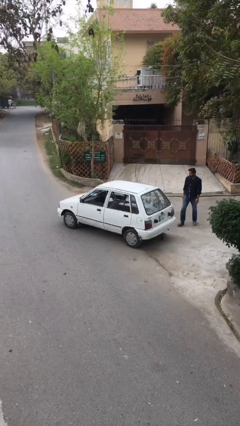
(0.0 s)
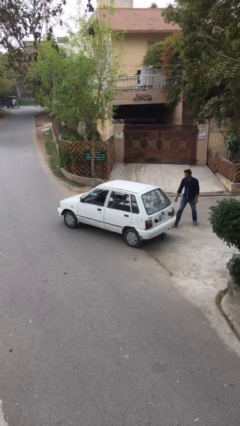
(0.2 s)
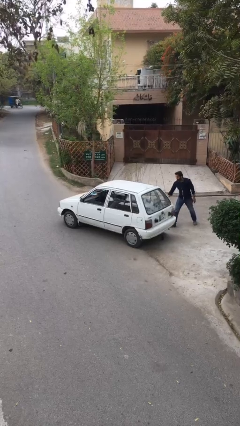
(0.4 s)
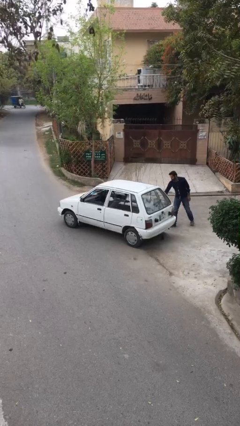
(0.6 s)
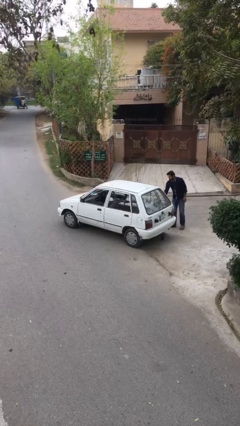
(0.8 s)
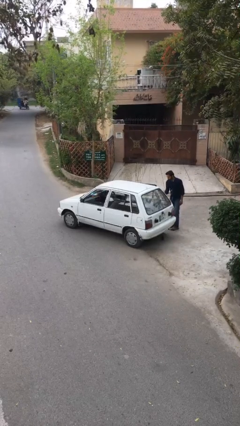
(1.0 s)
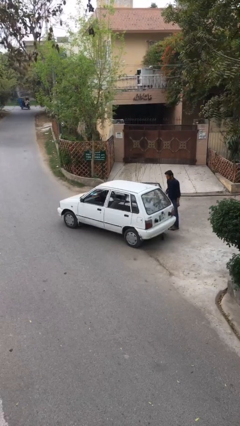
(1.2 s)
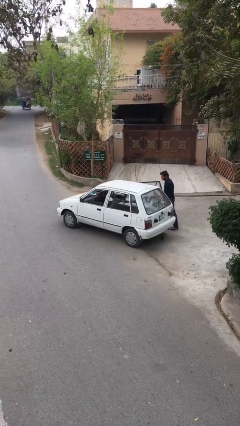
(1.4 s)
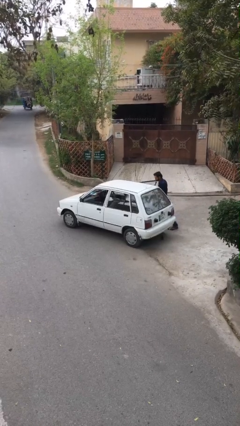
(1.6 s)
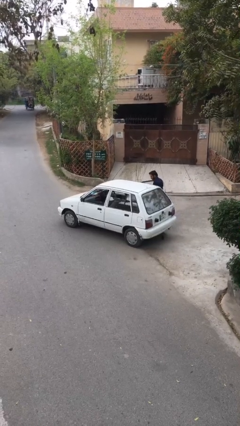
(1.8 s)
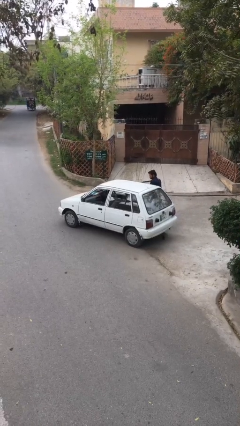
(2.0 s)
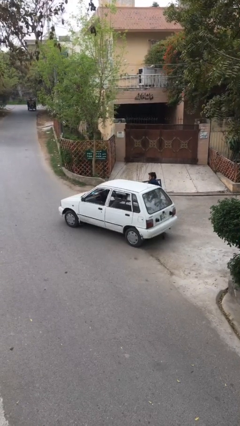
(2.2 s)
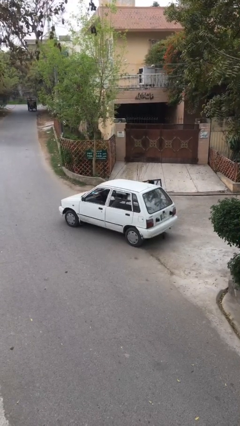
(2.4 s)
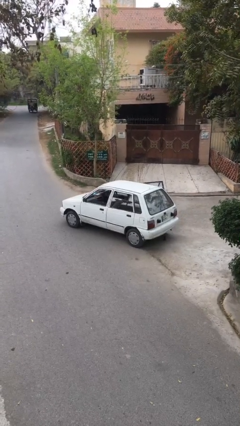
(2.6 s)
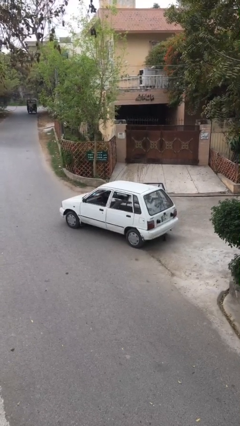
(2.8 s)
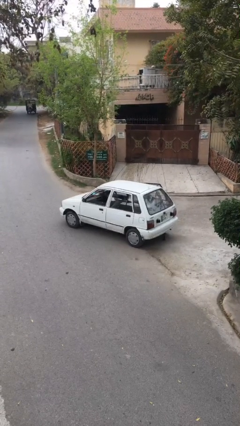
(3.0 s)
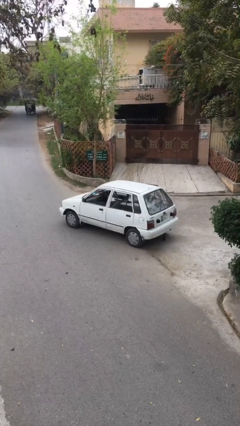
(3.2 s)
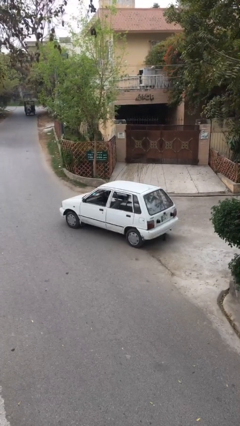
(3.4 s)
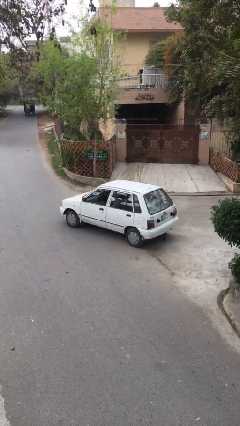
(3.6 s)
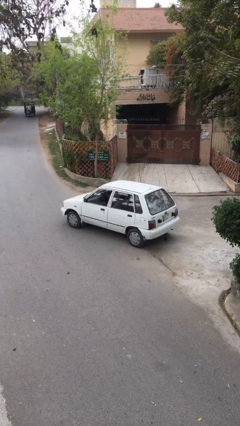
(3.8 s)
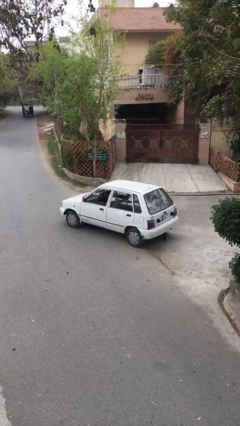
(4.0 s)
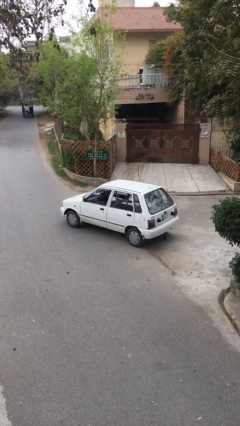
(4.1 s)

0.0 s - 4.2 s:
car picks up person

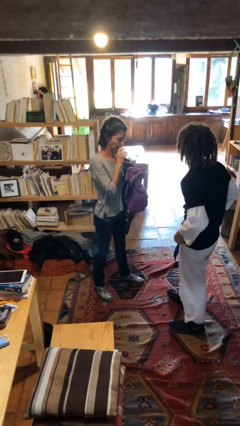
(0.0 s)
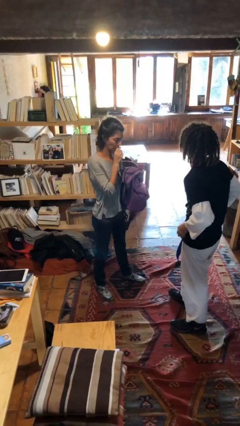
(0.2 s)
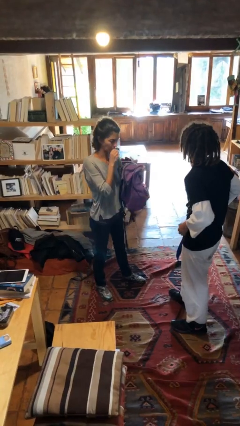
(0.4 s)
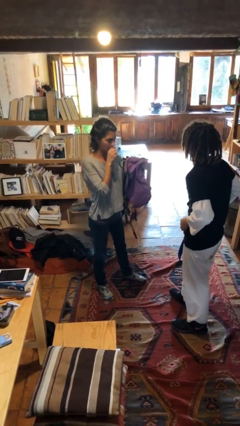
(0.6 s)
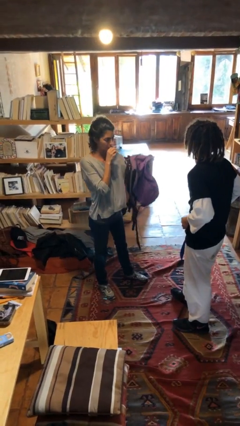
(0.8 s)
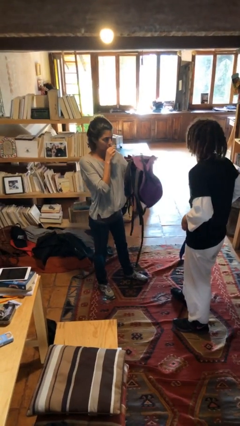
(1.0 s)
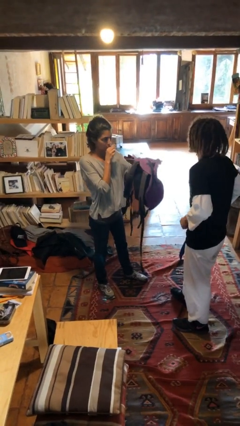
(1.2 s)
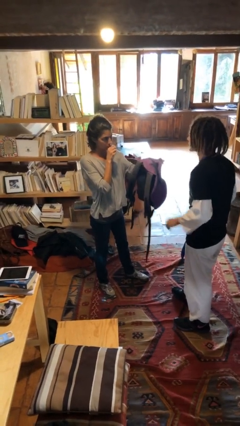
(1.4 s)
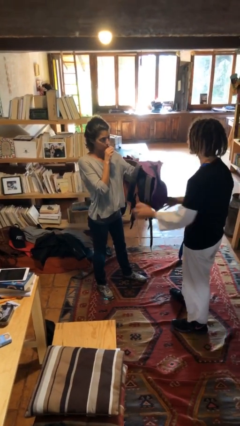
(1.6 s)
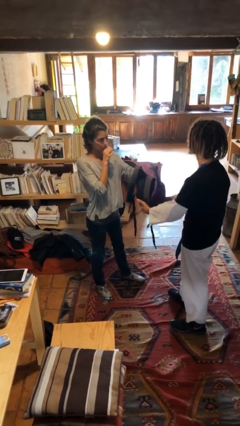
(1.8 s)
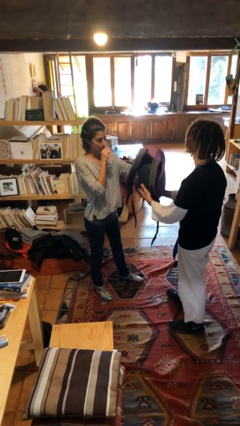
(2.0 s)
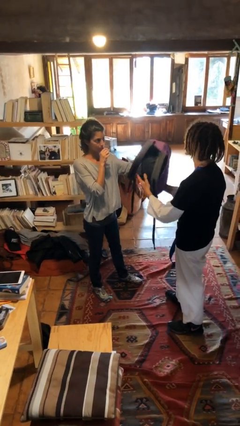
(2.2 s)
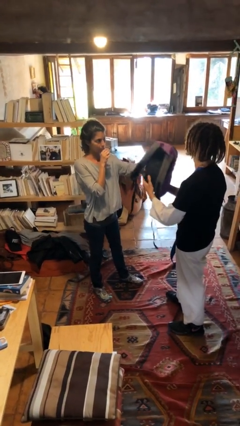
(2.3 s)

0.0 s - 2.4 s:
person transfers object to person

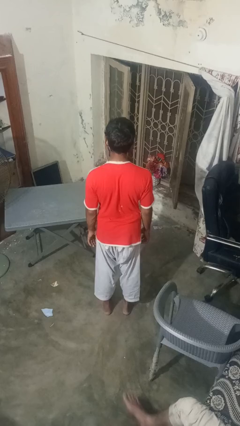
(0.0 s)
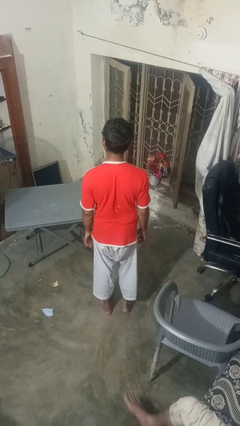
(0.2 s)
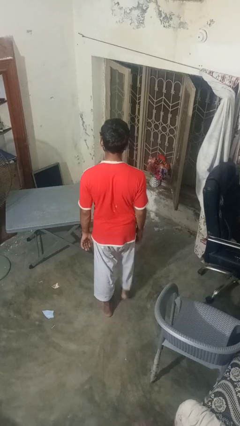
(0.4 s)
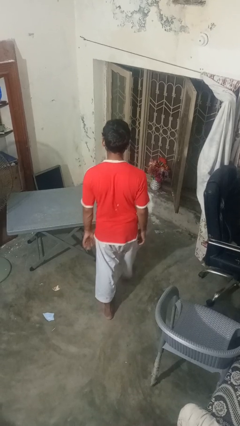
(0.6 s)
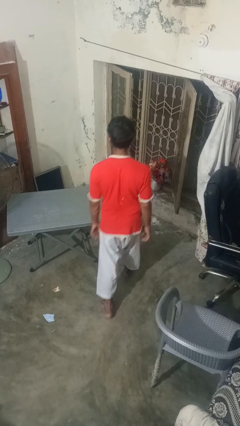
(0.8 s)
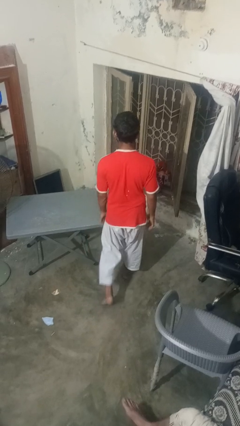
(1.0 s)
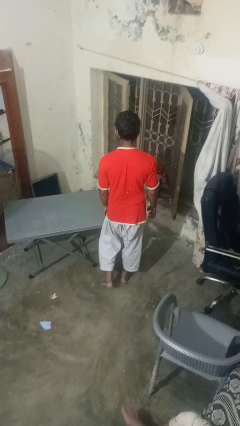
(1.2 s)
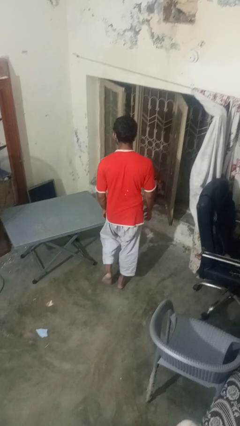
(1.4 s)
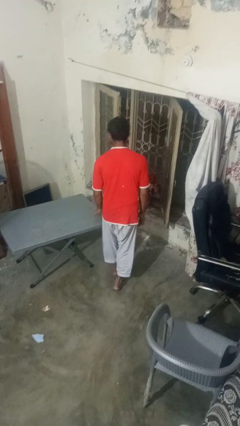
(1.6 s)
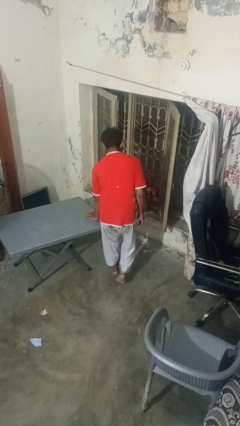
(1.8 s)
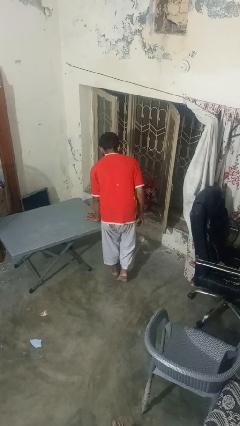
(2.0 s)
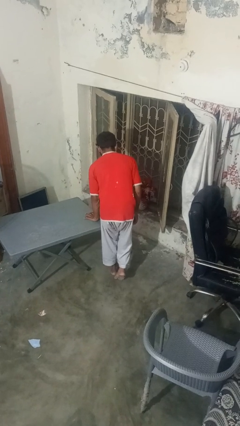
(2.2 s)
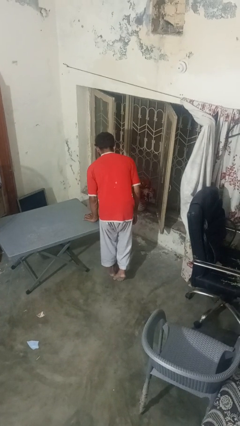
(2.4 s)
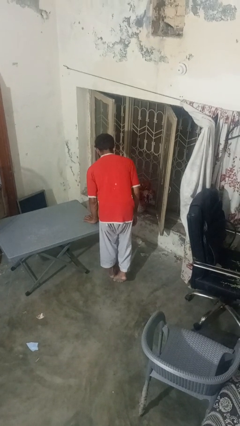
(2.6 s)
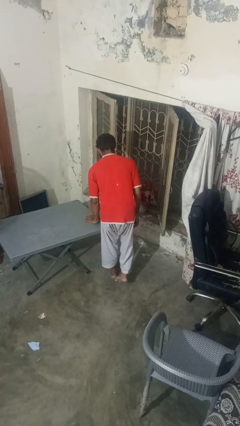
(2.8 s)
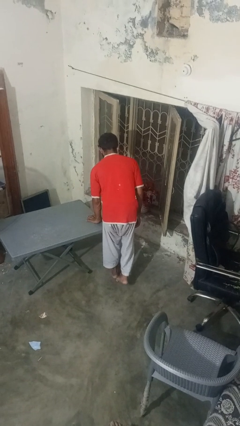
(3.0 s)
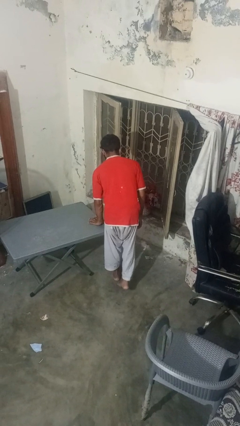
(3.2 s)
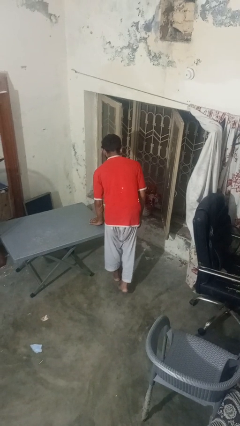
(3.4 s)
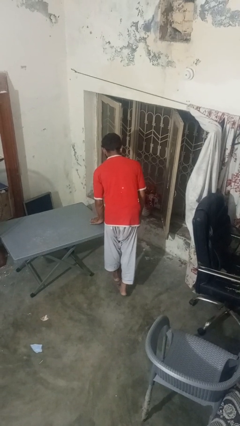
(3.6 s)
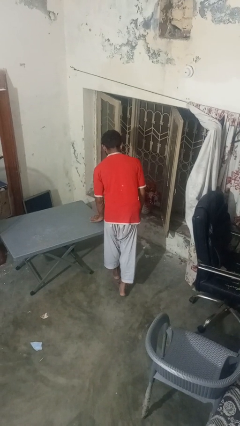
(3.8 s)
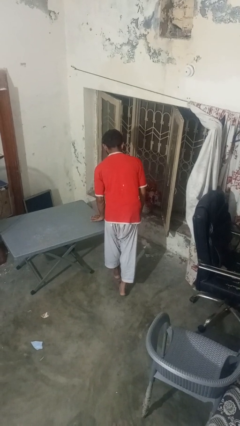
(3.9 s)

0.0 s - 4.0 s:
person bumps into table

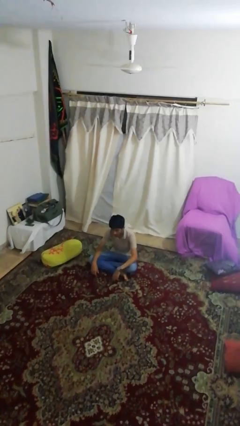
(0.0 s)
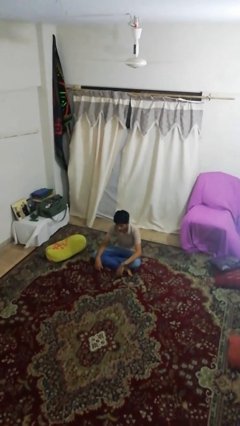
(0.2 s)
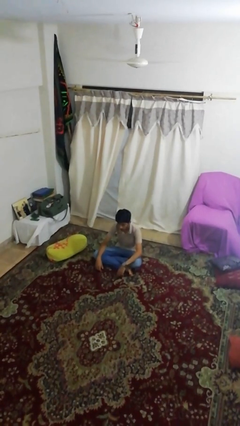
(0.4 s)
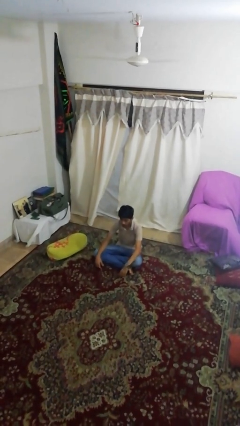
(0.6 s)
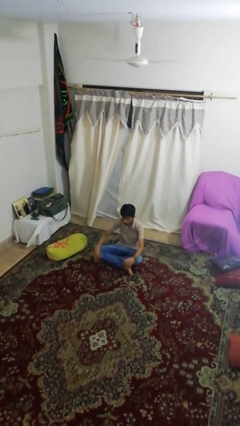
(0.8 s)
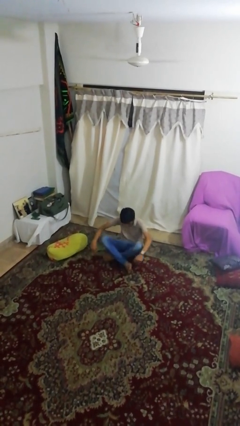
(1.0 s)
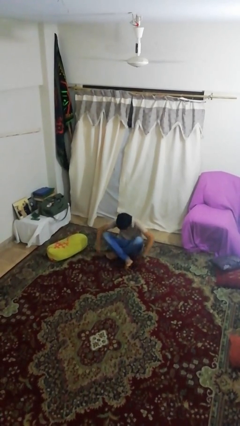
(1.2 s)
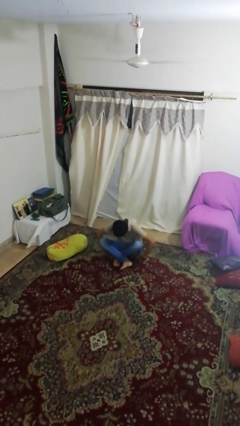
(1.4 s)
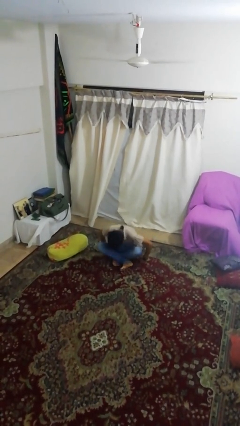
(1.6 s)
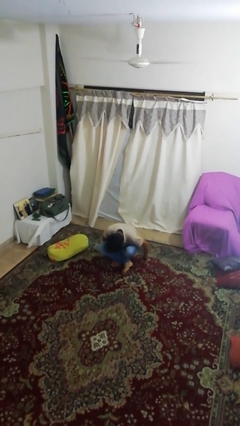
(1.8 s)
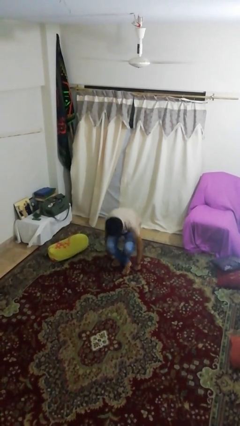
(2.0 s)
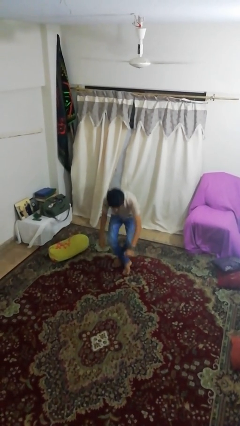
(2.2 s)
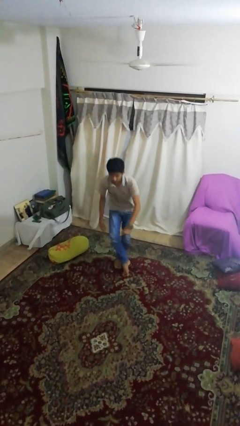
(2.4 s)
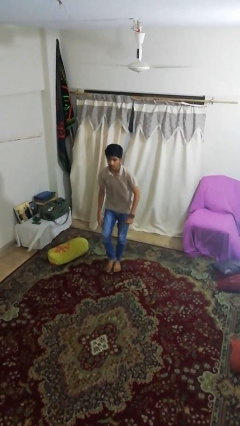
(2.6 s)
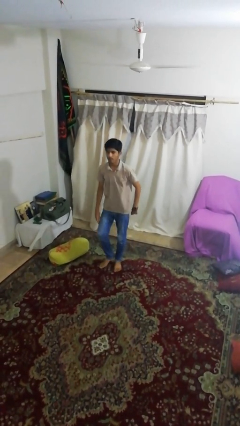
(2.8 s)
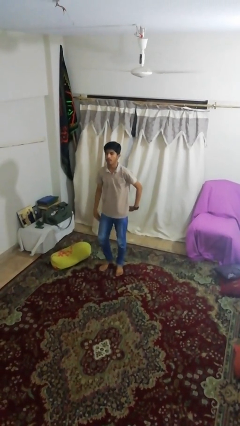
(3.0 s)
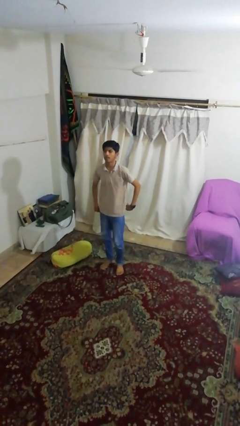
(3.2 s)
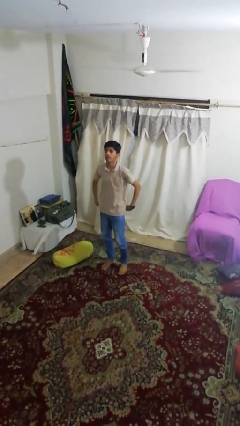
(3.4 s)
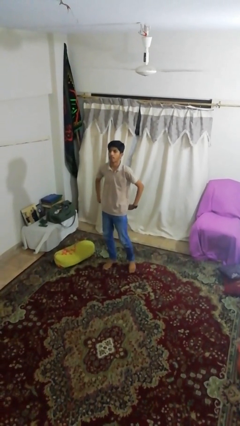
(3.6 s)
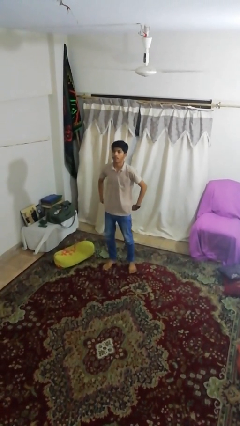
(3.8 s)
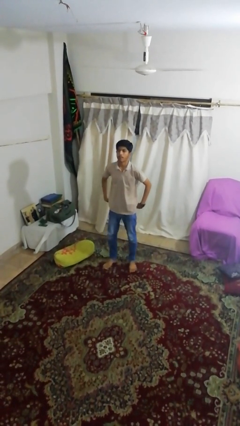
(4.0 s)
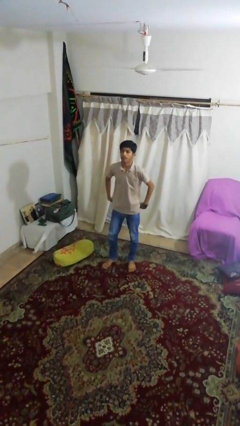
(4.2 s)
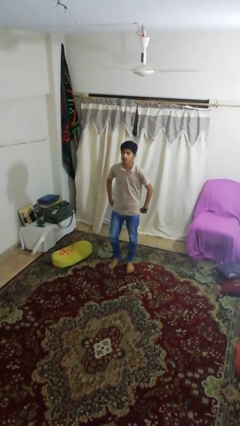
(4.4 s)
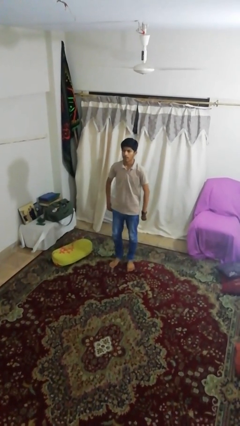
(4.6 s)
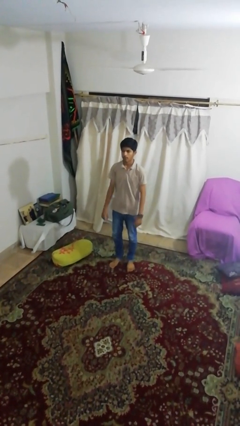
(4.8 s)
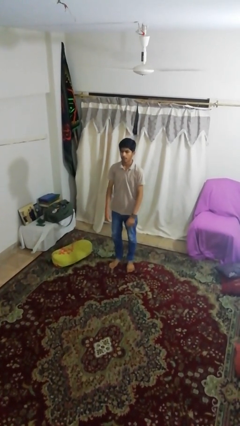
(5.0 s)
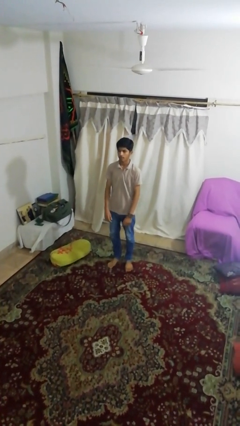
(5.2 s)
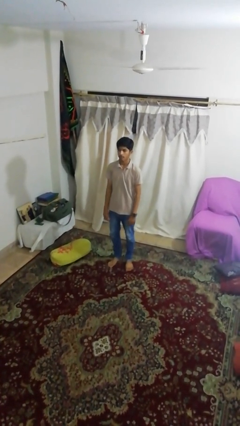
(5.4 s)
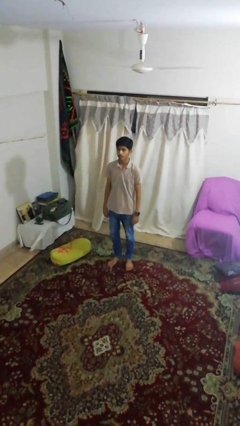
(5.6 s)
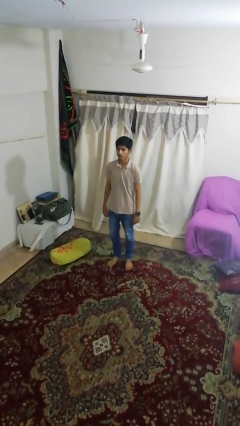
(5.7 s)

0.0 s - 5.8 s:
person stands up from floor

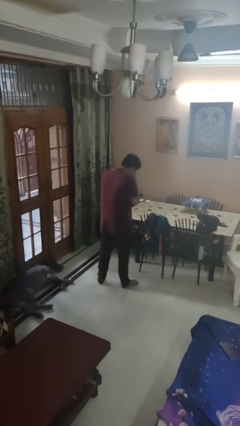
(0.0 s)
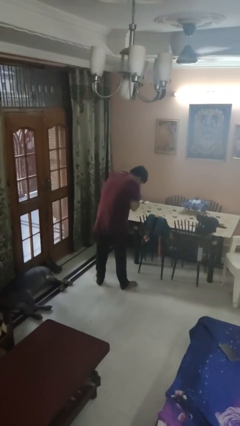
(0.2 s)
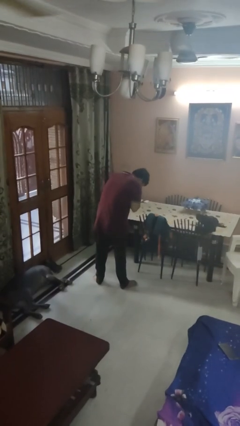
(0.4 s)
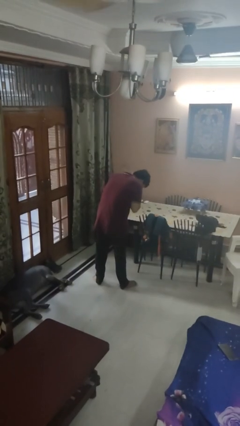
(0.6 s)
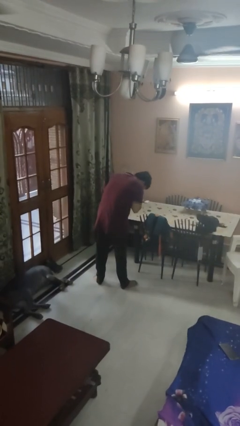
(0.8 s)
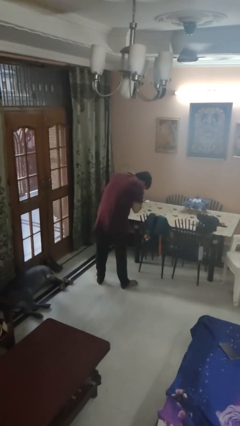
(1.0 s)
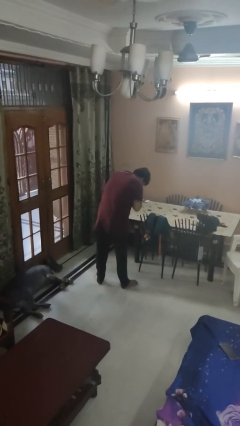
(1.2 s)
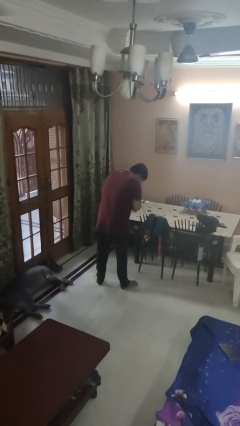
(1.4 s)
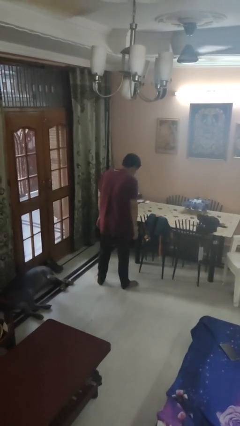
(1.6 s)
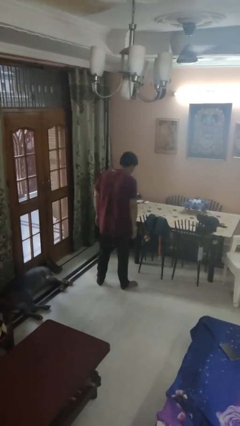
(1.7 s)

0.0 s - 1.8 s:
person sneezes into hand
